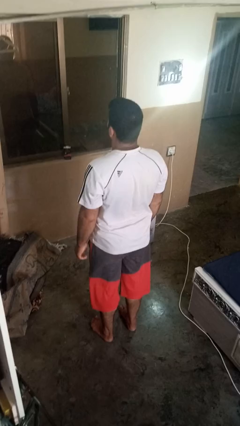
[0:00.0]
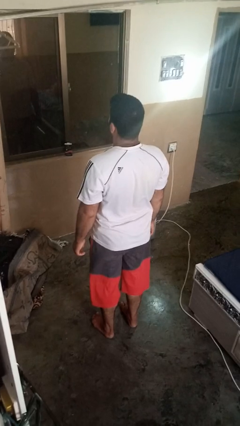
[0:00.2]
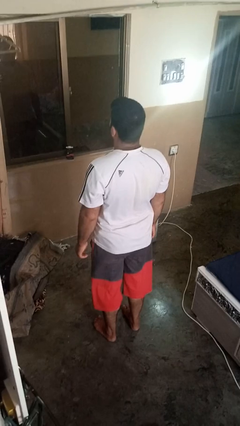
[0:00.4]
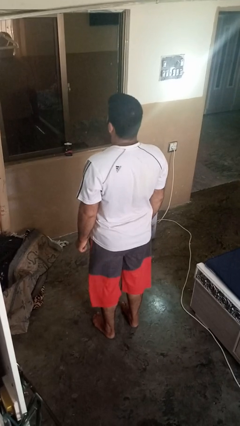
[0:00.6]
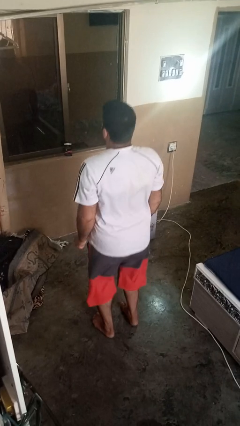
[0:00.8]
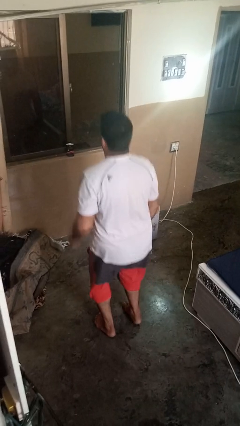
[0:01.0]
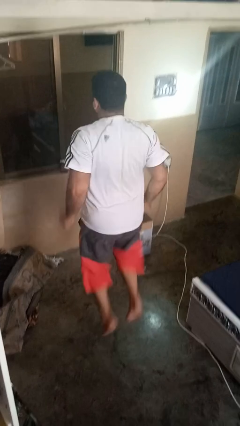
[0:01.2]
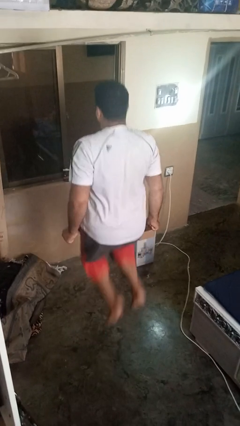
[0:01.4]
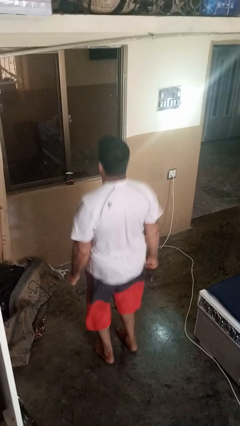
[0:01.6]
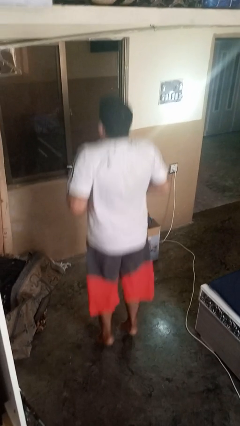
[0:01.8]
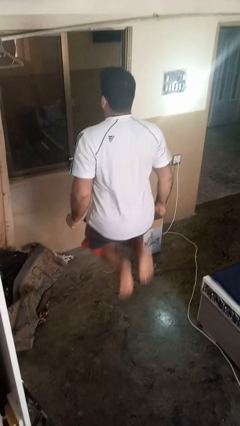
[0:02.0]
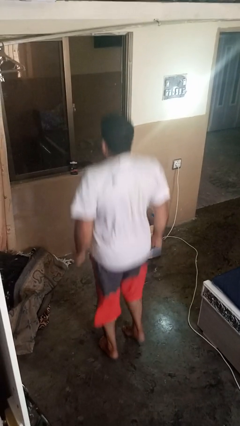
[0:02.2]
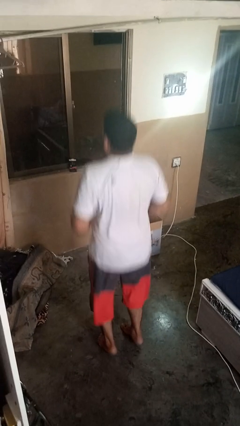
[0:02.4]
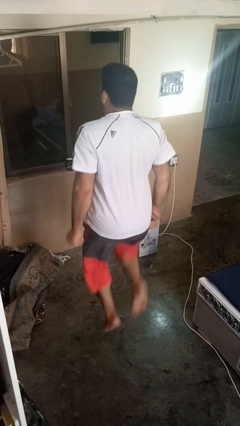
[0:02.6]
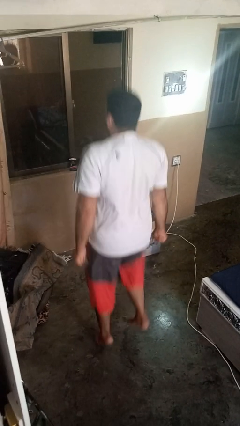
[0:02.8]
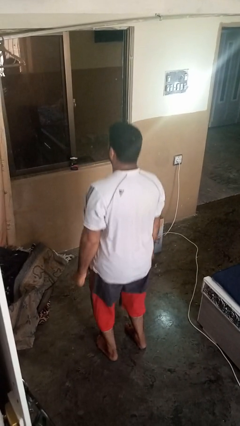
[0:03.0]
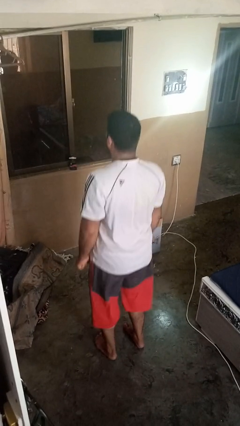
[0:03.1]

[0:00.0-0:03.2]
person jumps

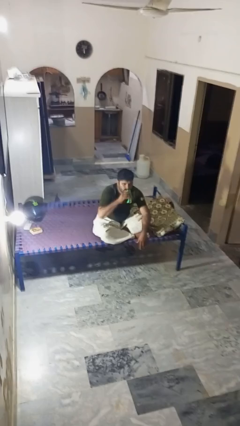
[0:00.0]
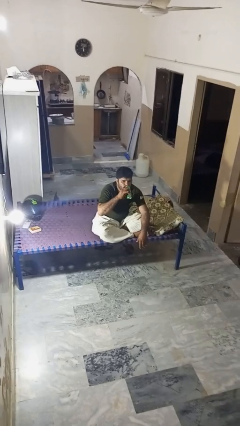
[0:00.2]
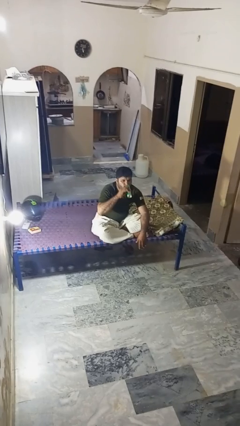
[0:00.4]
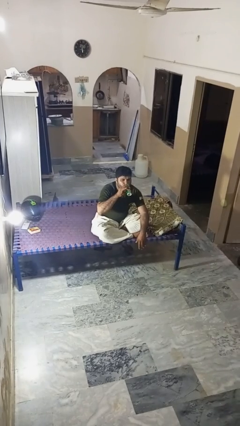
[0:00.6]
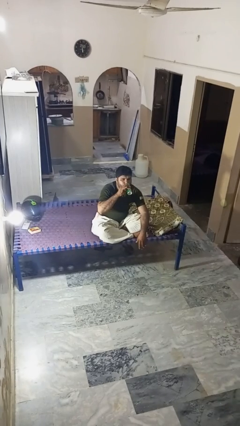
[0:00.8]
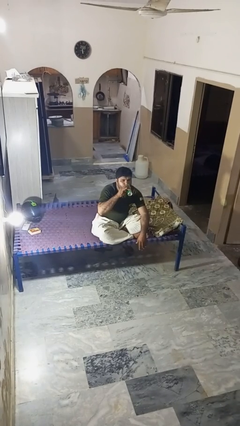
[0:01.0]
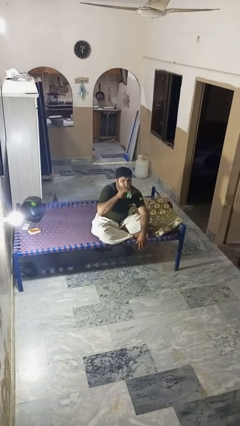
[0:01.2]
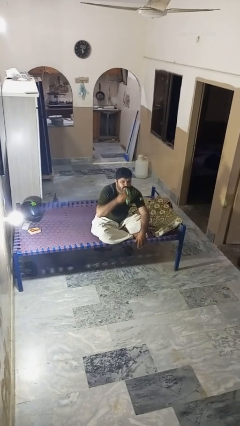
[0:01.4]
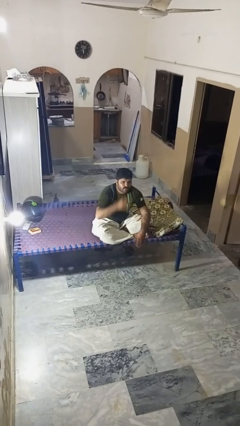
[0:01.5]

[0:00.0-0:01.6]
person drinks from beverage can

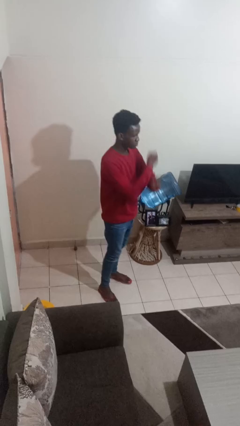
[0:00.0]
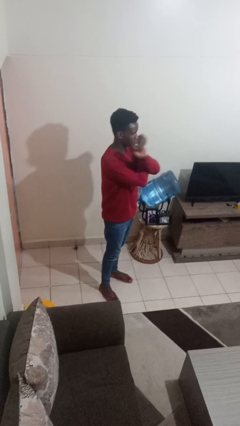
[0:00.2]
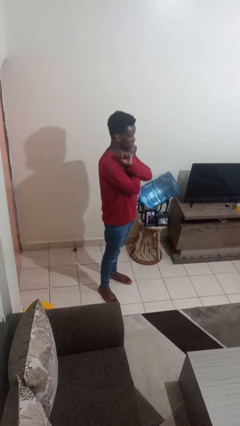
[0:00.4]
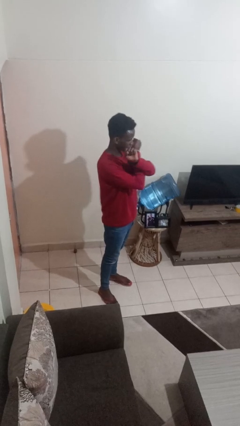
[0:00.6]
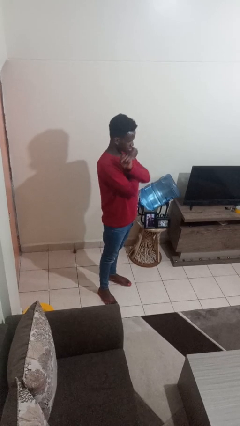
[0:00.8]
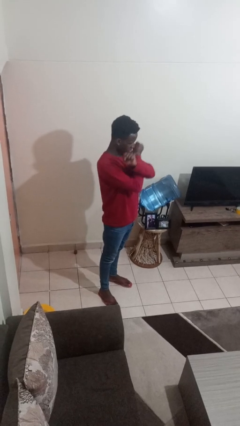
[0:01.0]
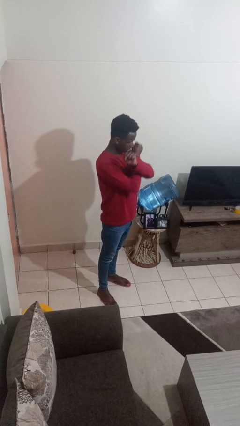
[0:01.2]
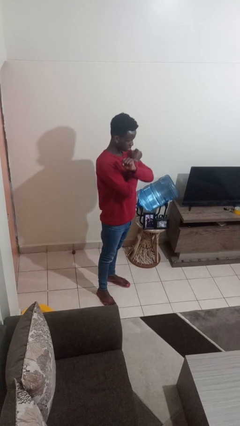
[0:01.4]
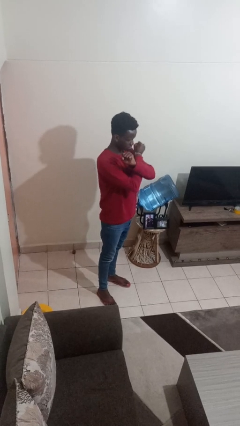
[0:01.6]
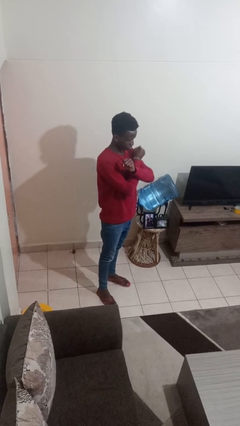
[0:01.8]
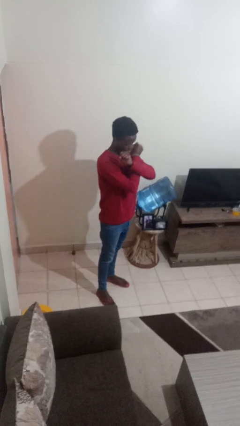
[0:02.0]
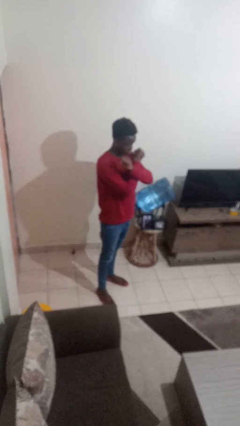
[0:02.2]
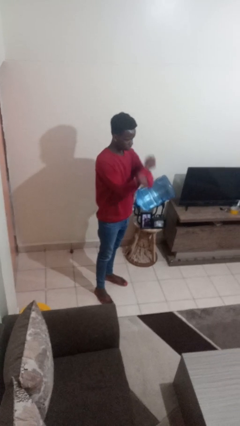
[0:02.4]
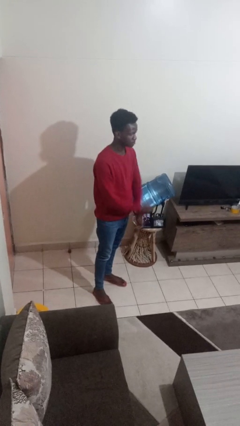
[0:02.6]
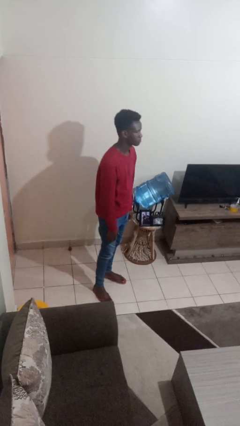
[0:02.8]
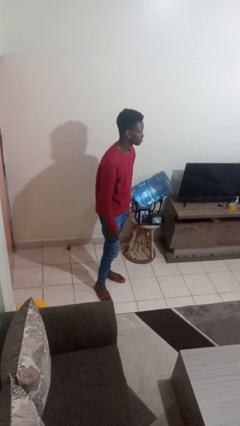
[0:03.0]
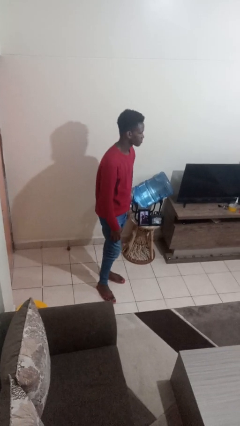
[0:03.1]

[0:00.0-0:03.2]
person gestures arms x

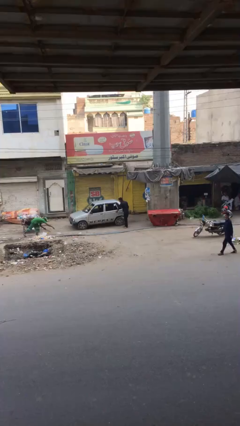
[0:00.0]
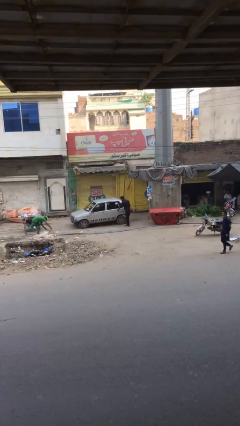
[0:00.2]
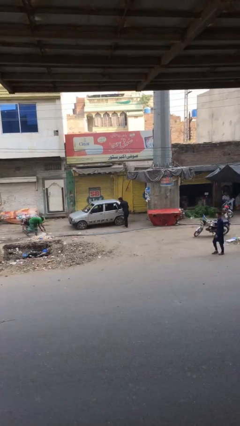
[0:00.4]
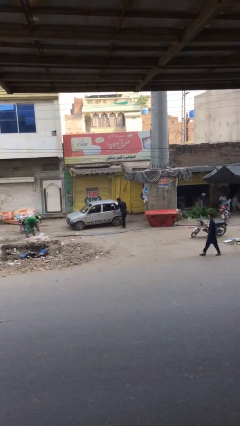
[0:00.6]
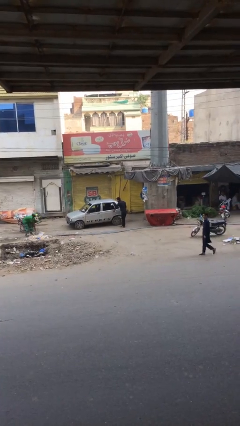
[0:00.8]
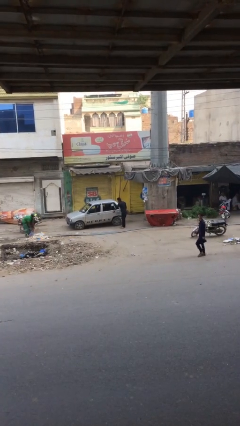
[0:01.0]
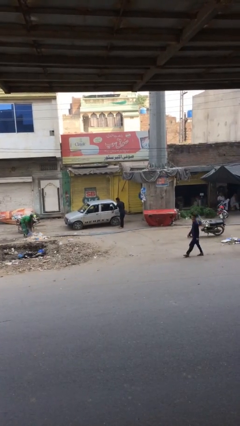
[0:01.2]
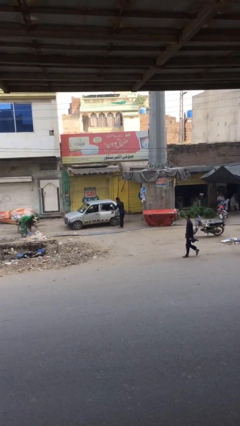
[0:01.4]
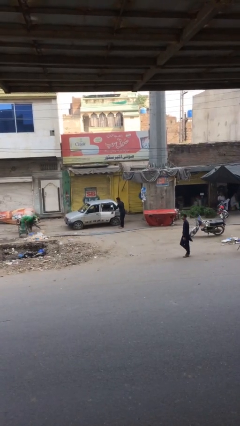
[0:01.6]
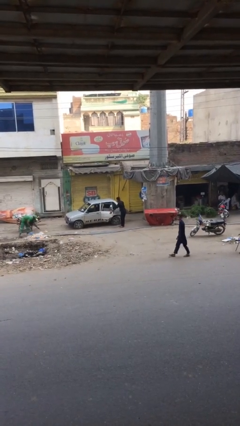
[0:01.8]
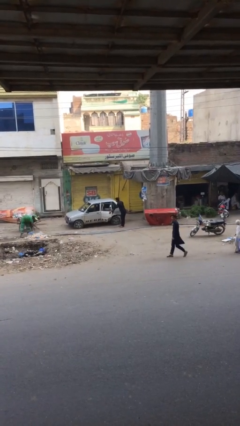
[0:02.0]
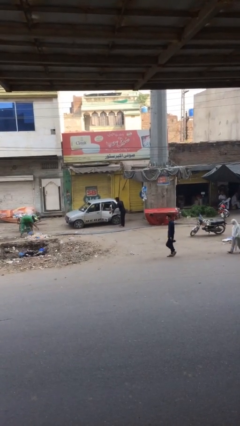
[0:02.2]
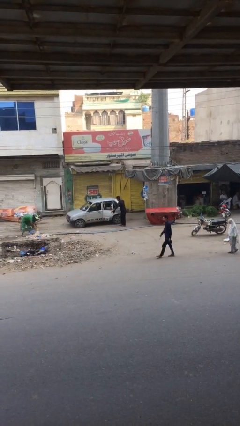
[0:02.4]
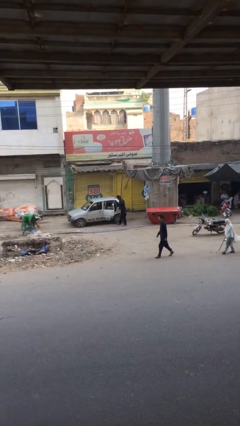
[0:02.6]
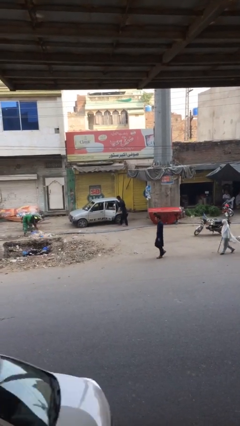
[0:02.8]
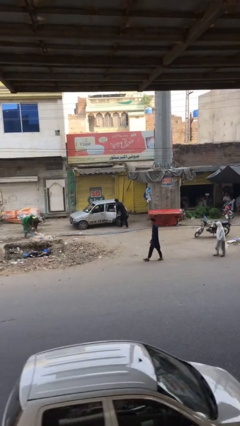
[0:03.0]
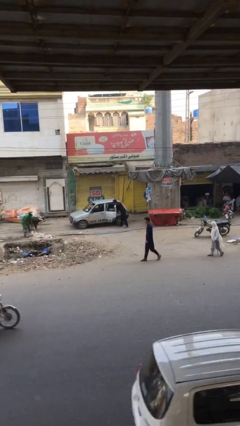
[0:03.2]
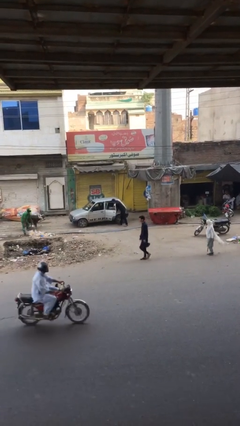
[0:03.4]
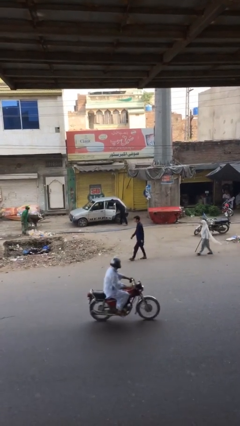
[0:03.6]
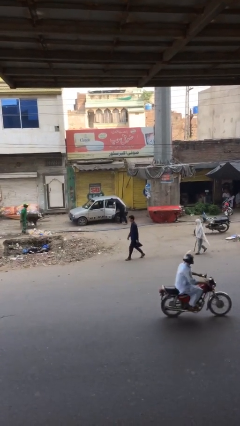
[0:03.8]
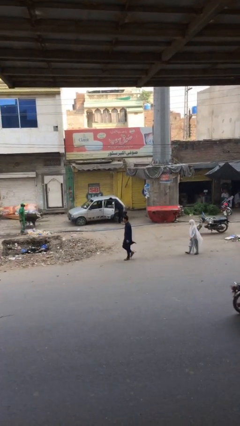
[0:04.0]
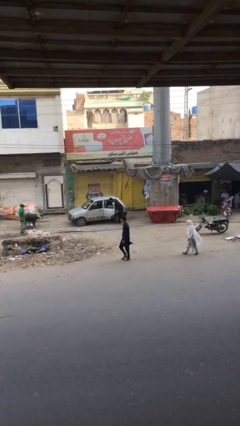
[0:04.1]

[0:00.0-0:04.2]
person opens car door

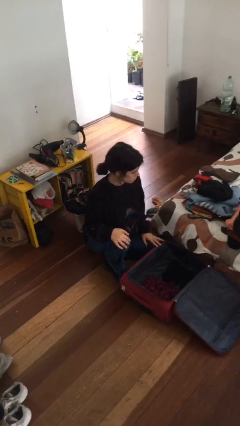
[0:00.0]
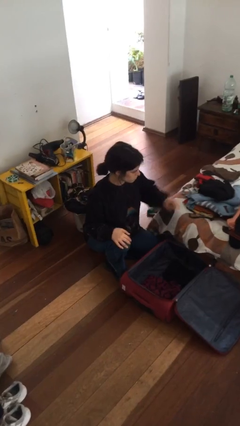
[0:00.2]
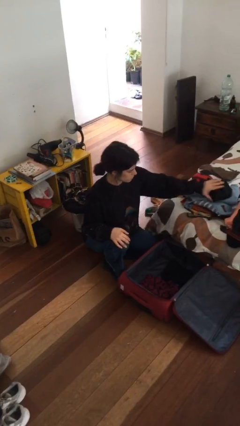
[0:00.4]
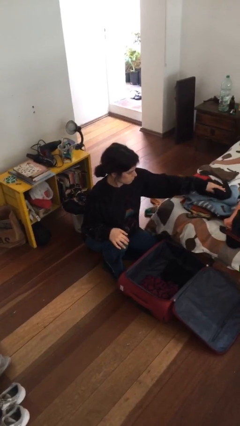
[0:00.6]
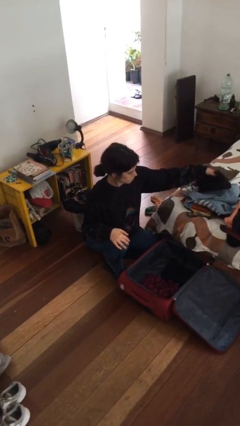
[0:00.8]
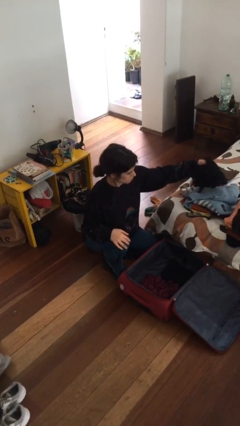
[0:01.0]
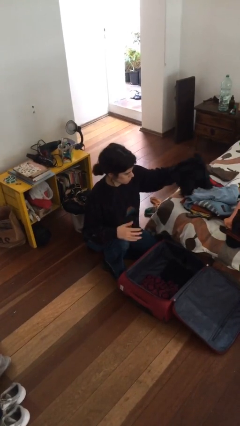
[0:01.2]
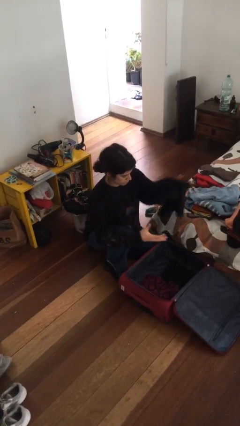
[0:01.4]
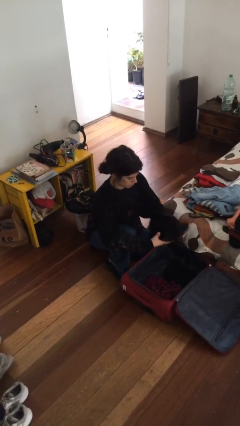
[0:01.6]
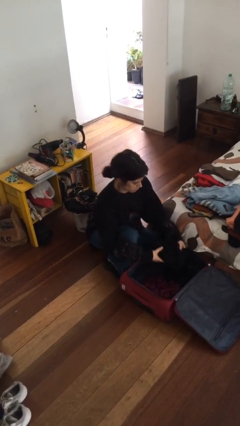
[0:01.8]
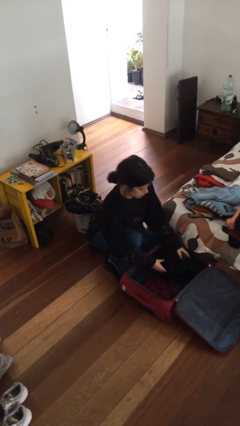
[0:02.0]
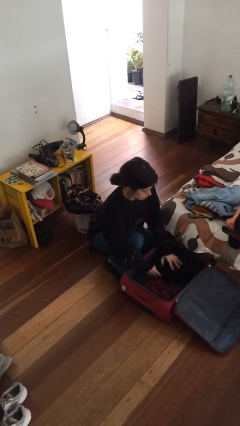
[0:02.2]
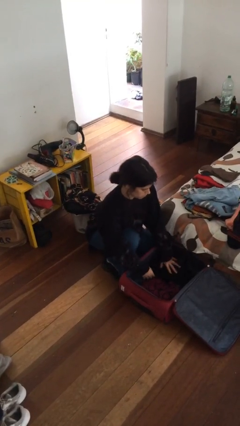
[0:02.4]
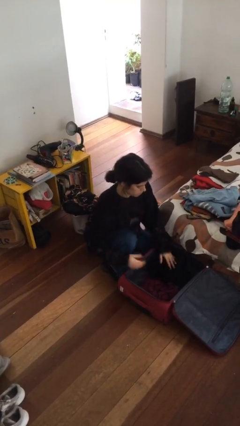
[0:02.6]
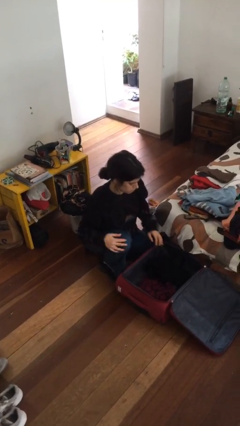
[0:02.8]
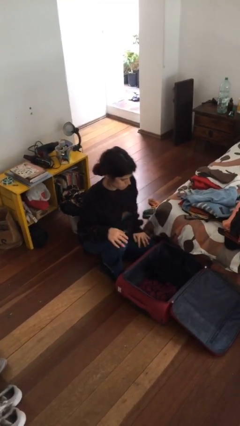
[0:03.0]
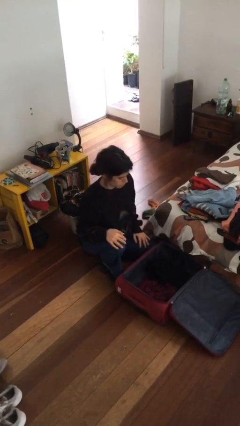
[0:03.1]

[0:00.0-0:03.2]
person loads clothes into suitcase

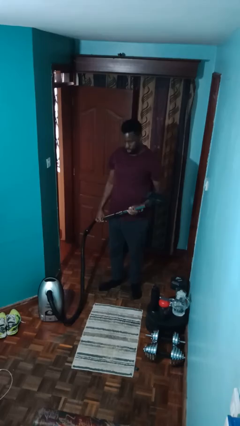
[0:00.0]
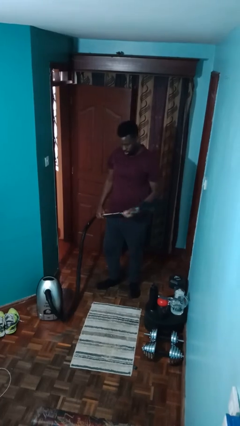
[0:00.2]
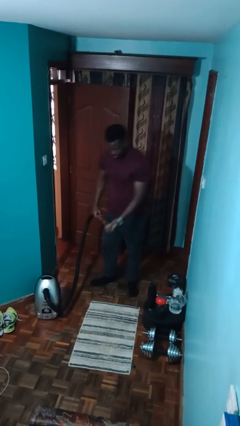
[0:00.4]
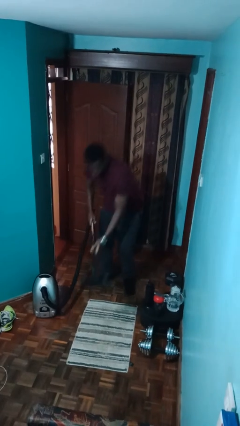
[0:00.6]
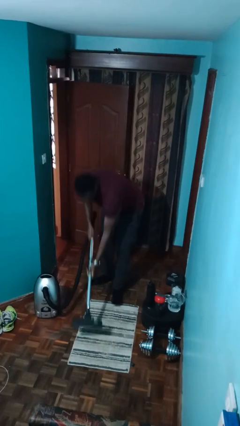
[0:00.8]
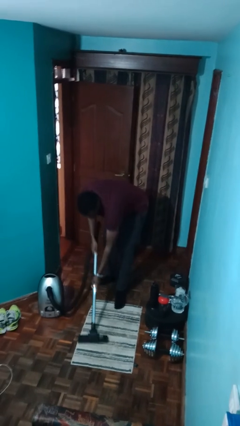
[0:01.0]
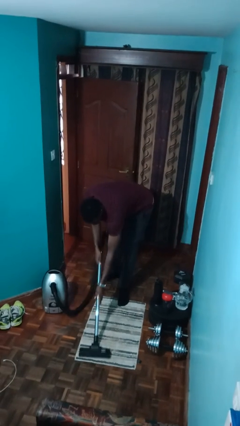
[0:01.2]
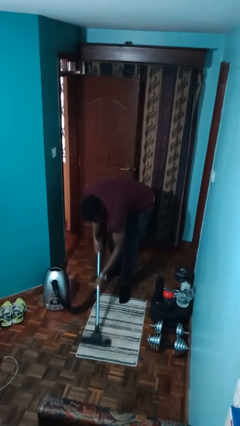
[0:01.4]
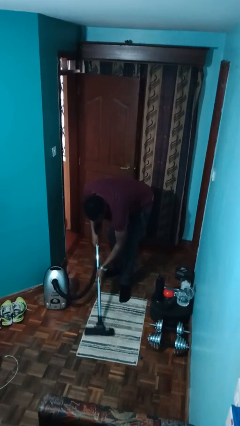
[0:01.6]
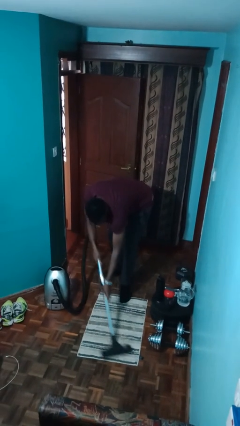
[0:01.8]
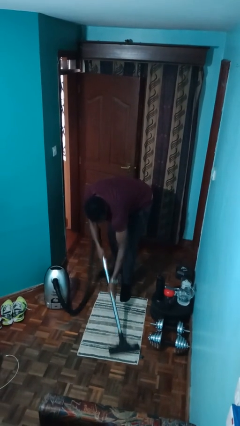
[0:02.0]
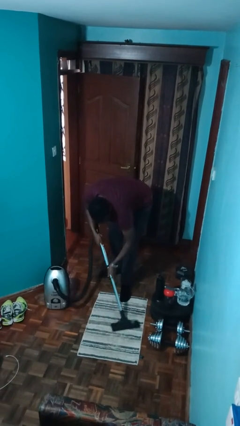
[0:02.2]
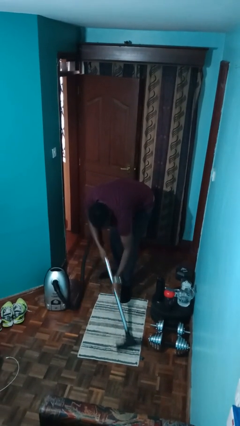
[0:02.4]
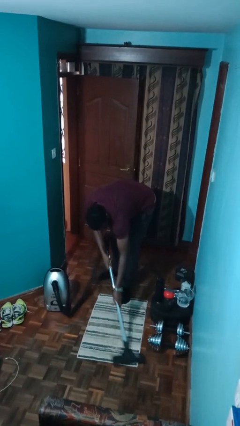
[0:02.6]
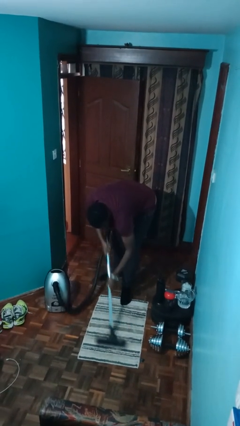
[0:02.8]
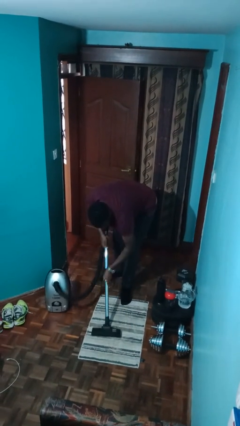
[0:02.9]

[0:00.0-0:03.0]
person vacuums carpet
